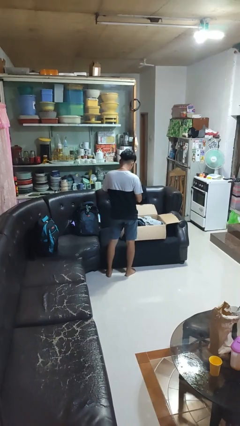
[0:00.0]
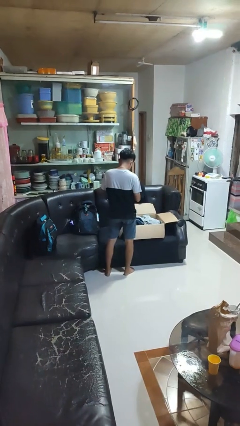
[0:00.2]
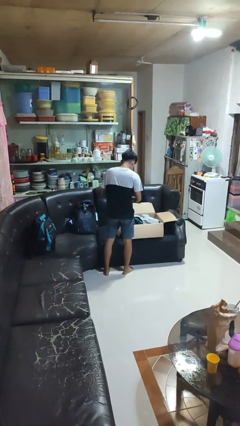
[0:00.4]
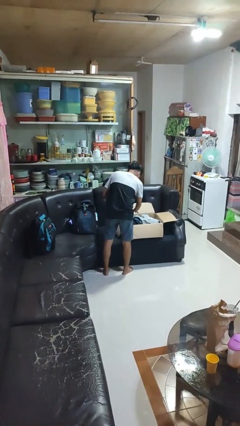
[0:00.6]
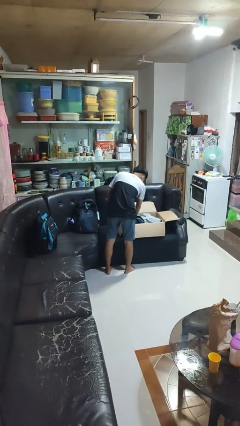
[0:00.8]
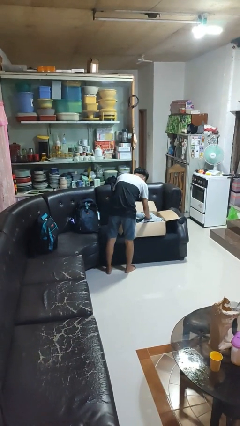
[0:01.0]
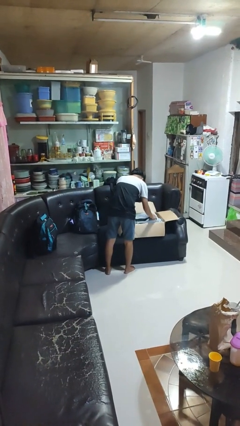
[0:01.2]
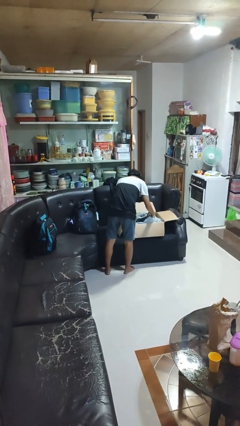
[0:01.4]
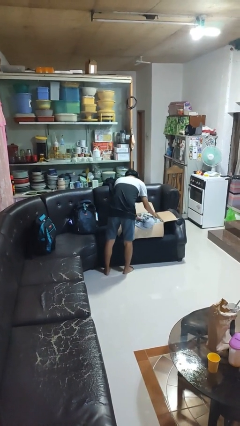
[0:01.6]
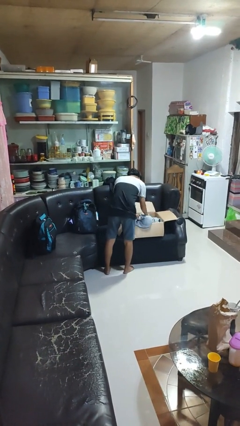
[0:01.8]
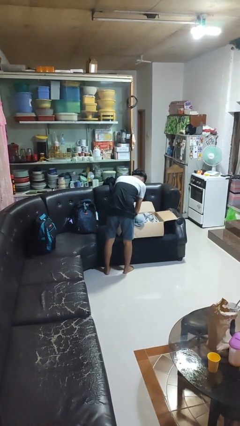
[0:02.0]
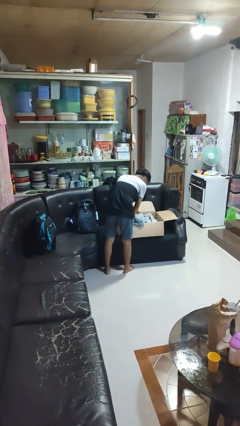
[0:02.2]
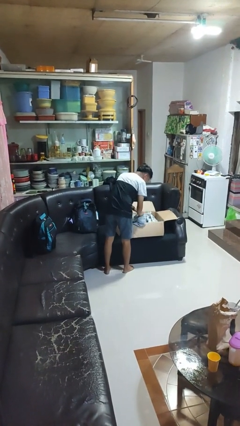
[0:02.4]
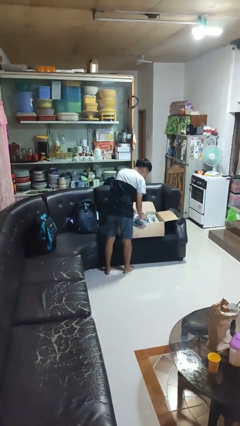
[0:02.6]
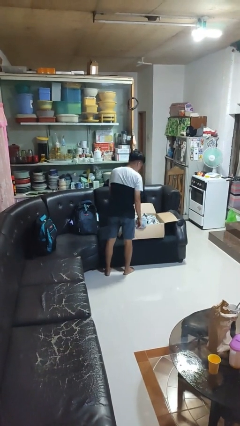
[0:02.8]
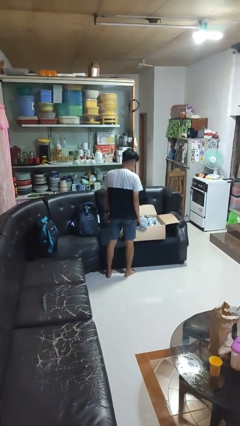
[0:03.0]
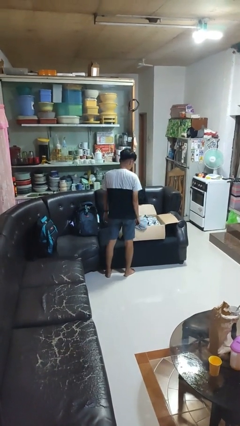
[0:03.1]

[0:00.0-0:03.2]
person searches in box

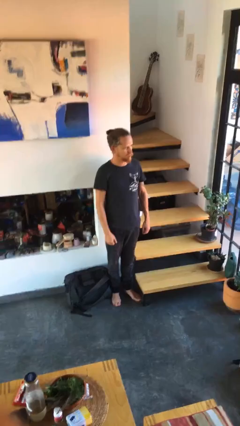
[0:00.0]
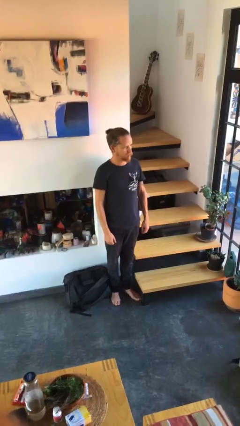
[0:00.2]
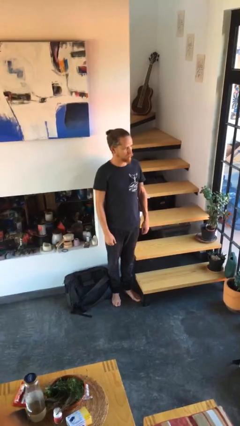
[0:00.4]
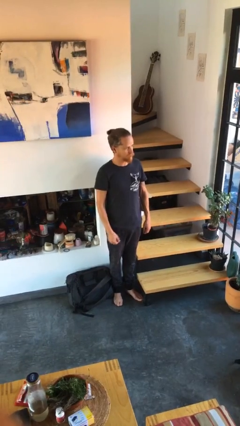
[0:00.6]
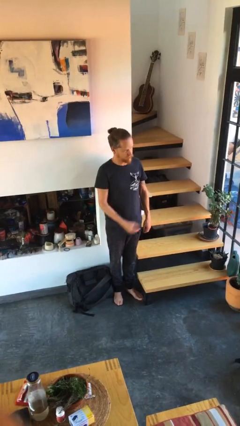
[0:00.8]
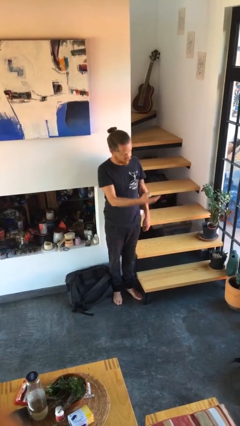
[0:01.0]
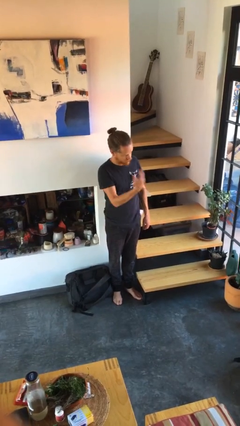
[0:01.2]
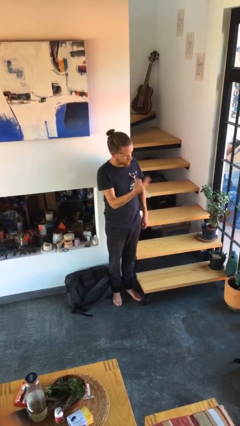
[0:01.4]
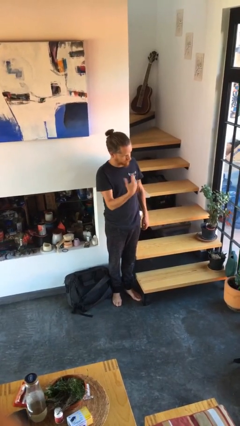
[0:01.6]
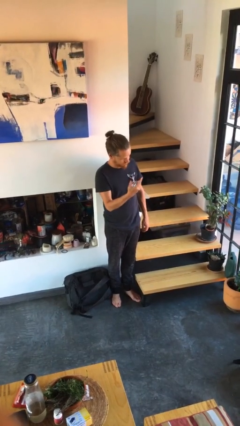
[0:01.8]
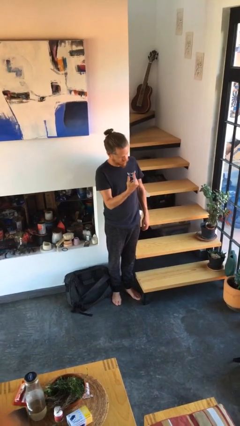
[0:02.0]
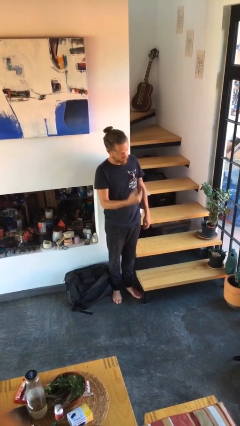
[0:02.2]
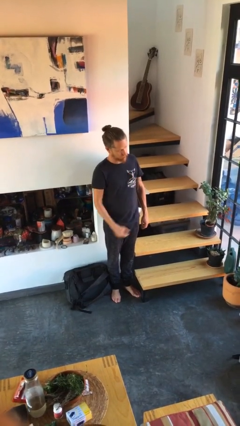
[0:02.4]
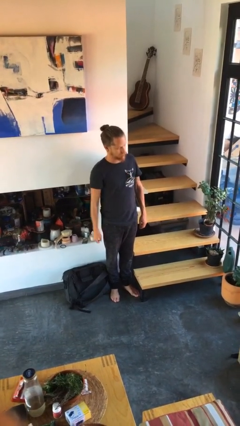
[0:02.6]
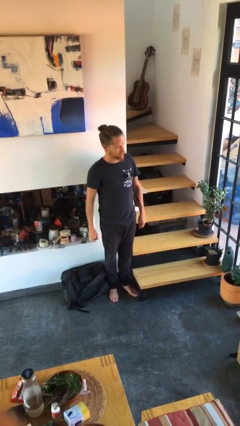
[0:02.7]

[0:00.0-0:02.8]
person gestures come here

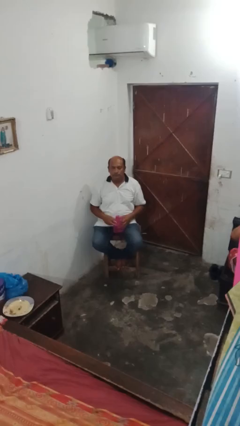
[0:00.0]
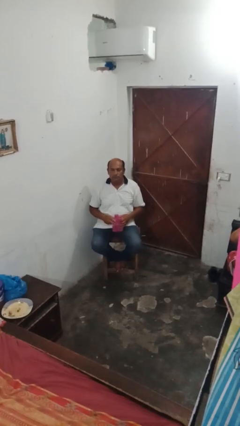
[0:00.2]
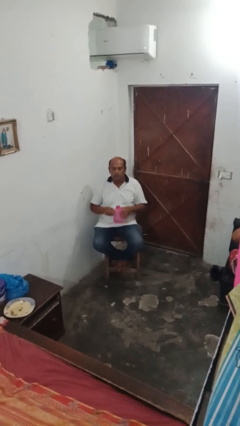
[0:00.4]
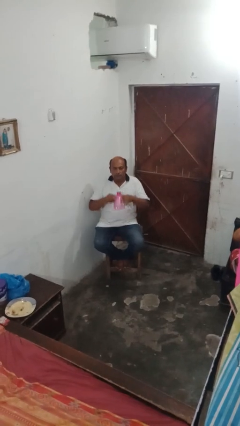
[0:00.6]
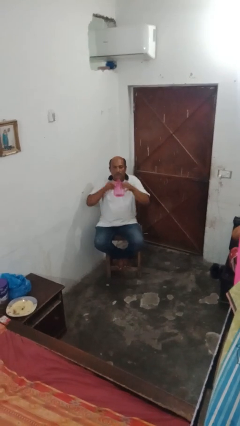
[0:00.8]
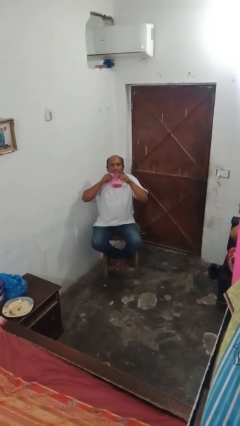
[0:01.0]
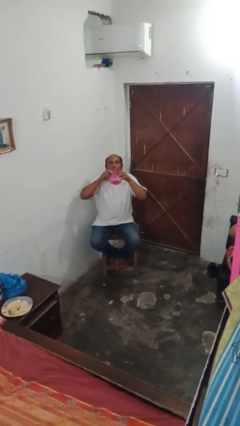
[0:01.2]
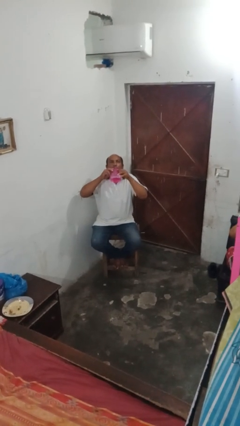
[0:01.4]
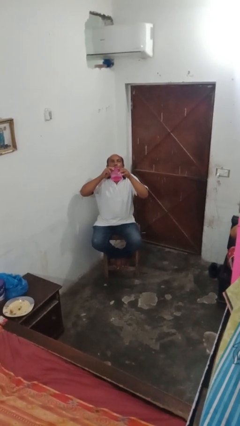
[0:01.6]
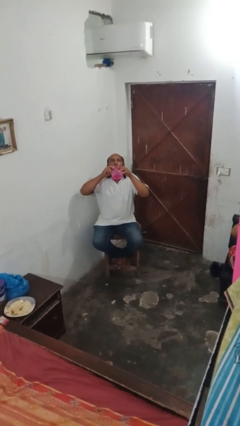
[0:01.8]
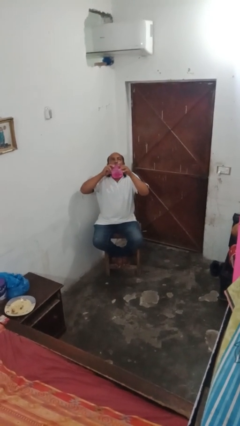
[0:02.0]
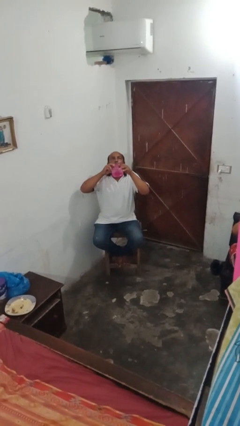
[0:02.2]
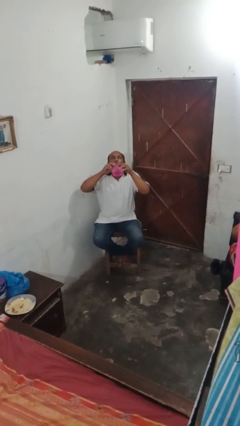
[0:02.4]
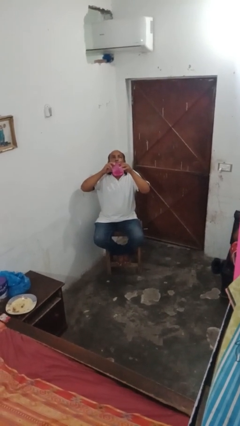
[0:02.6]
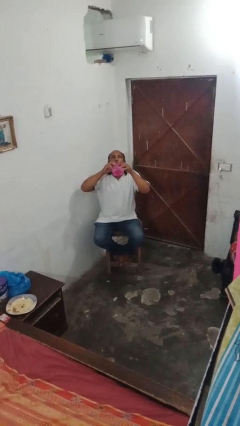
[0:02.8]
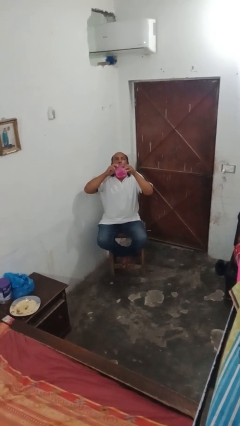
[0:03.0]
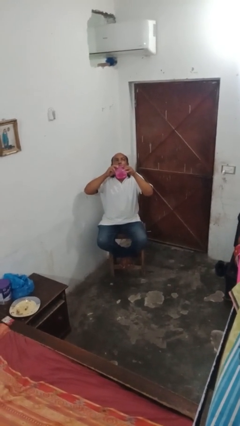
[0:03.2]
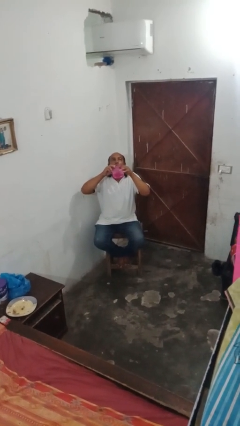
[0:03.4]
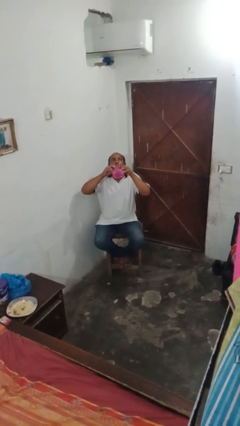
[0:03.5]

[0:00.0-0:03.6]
person drinks from bottle

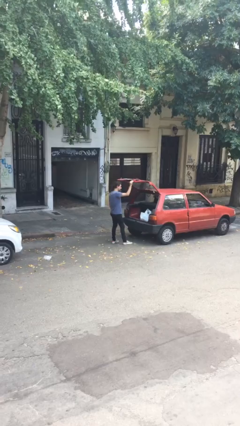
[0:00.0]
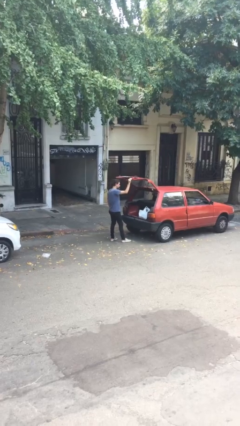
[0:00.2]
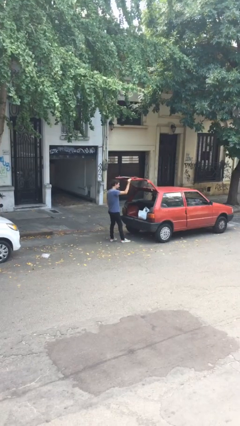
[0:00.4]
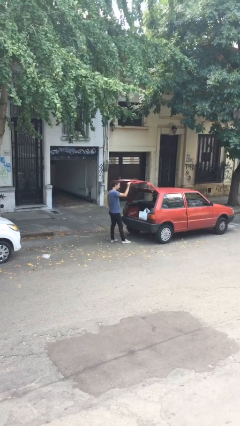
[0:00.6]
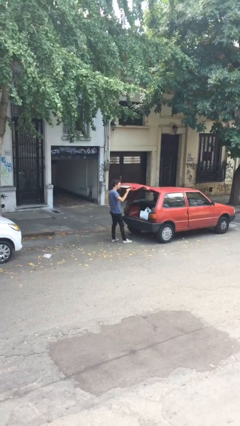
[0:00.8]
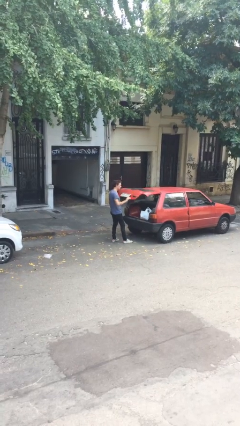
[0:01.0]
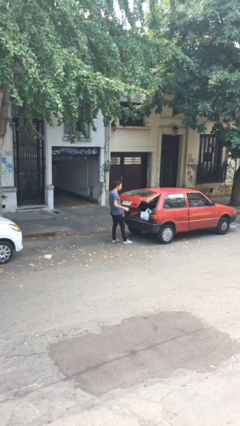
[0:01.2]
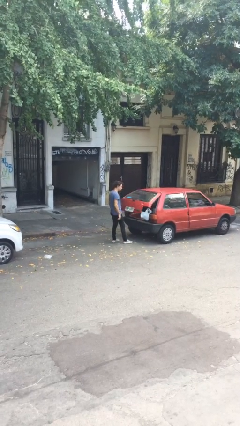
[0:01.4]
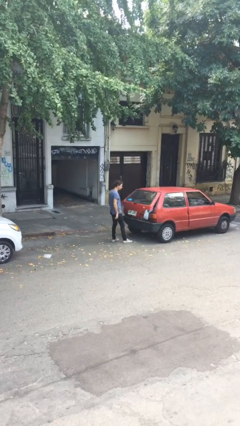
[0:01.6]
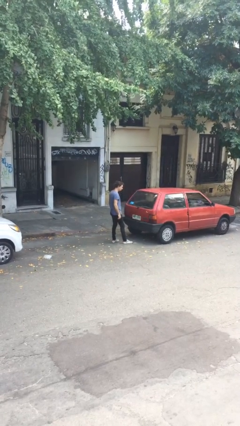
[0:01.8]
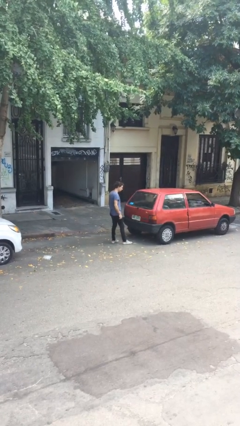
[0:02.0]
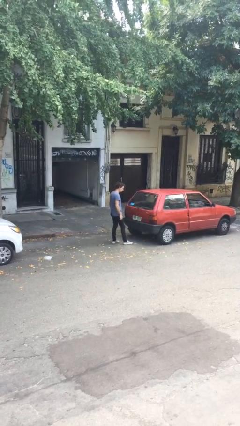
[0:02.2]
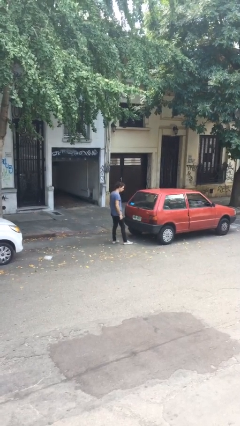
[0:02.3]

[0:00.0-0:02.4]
person closes car trunk

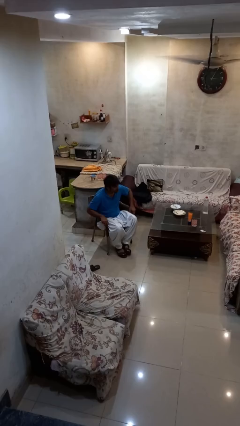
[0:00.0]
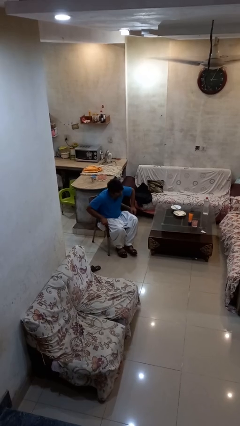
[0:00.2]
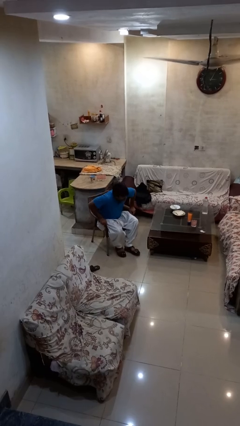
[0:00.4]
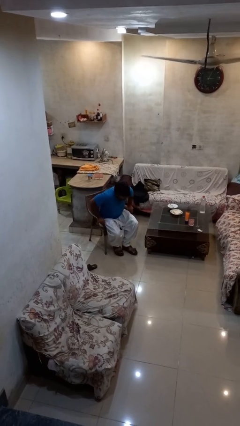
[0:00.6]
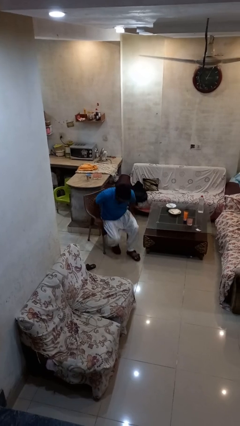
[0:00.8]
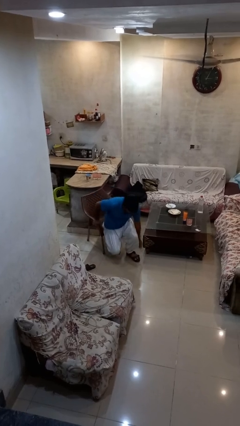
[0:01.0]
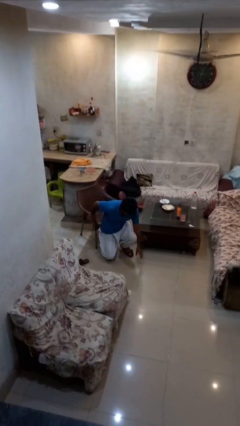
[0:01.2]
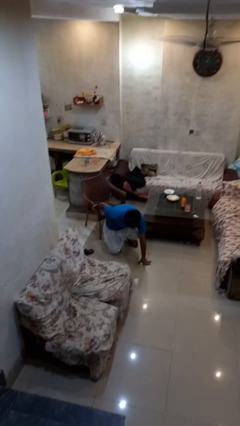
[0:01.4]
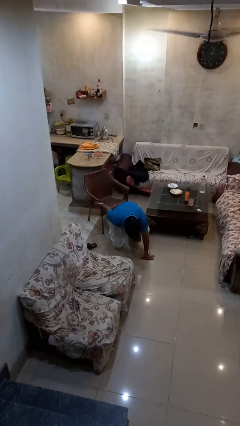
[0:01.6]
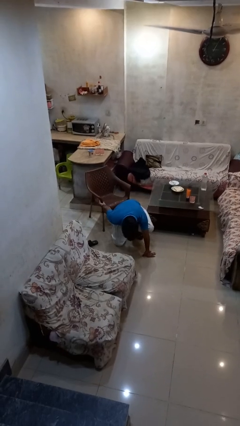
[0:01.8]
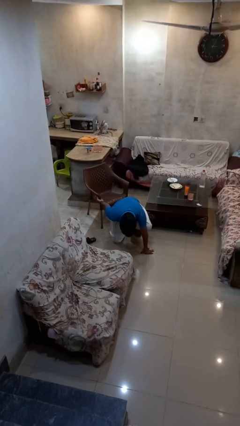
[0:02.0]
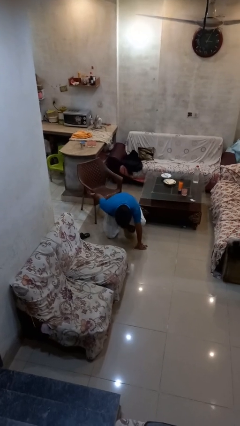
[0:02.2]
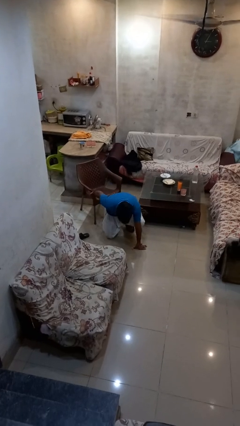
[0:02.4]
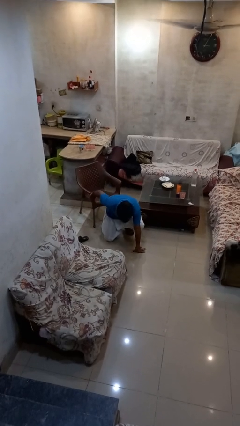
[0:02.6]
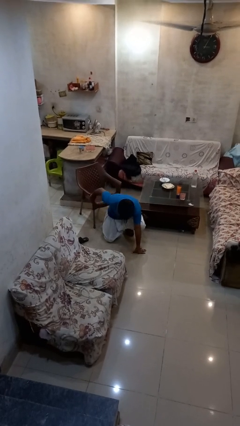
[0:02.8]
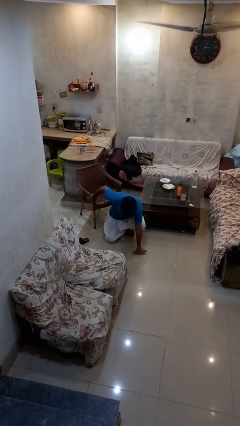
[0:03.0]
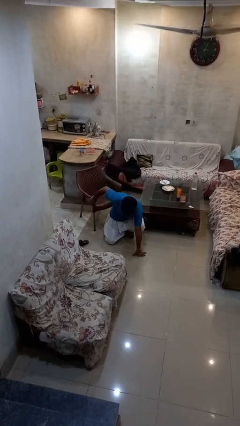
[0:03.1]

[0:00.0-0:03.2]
person falls from chair

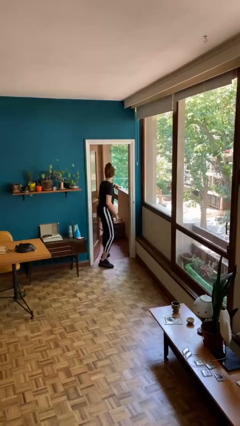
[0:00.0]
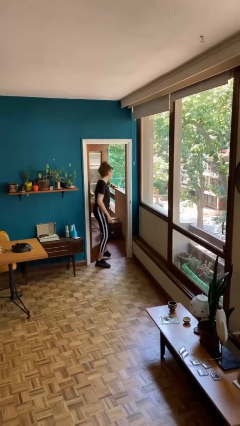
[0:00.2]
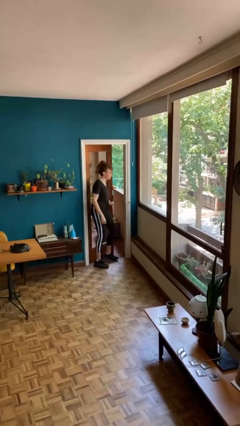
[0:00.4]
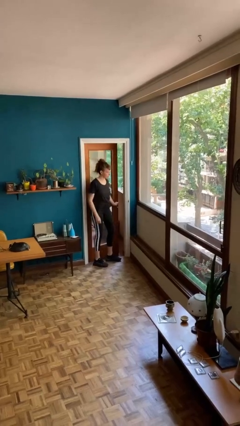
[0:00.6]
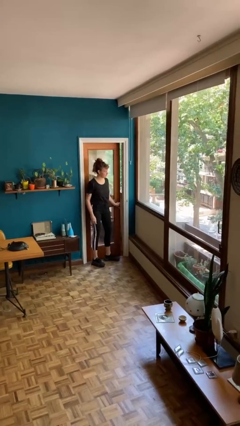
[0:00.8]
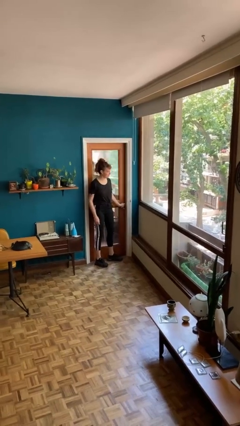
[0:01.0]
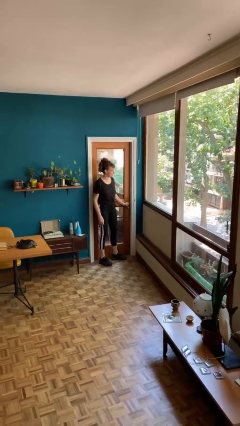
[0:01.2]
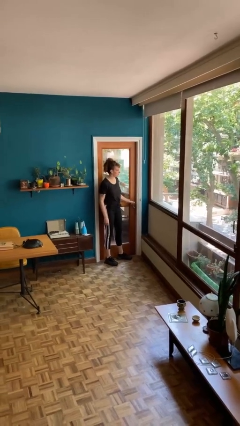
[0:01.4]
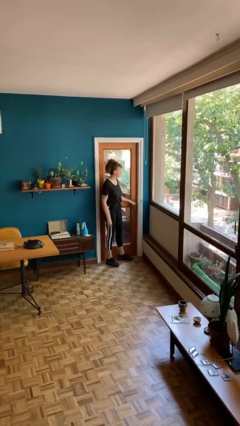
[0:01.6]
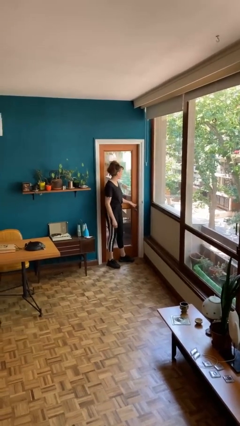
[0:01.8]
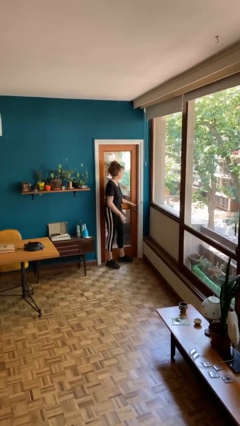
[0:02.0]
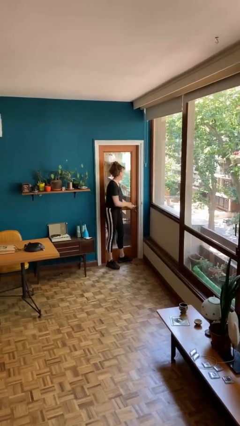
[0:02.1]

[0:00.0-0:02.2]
person closes facility door
